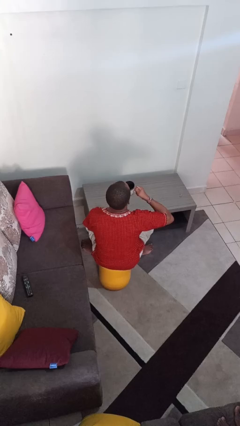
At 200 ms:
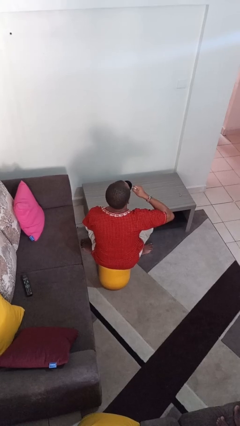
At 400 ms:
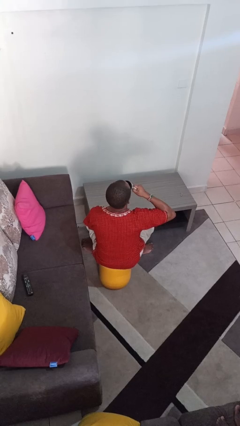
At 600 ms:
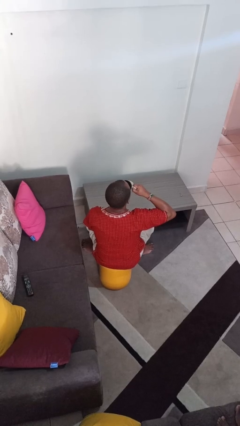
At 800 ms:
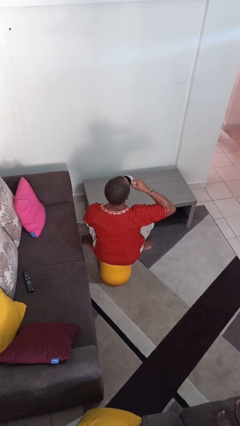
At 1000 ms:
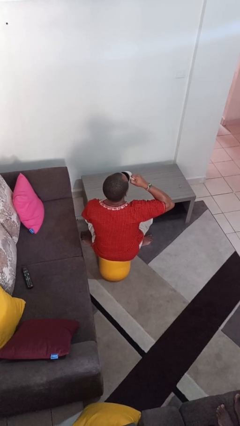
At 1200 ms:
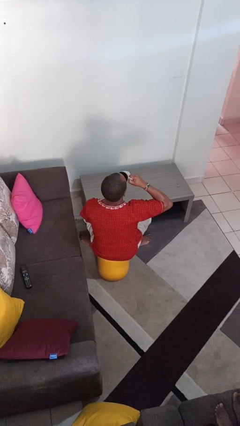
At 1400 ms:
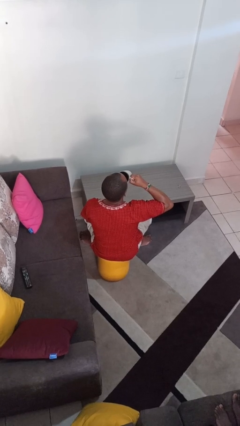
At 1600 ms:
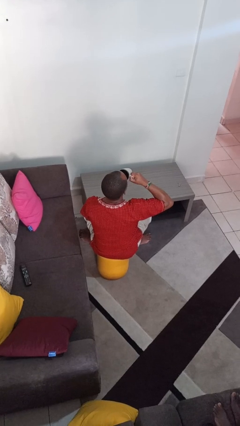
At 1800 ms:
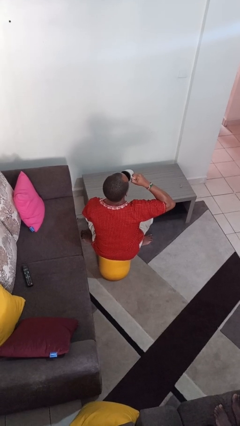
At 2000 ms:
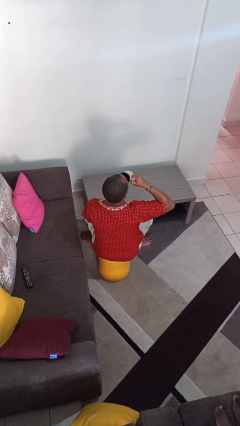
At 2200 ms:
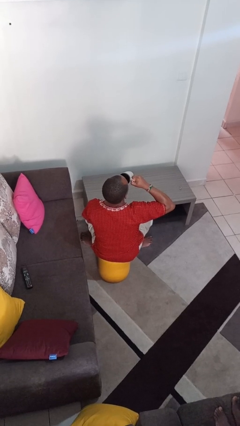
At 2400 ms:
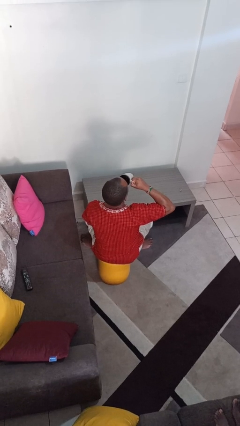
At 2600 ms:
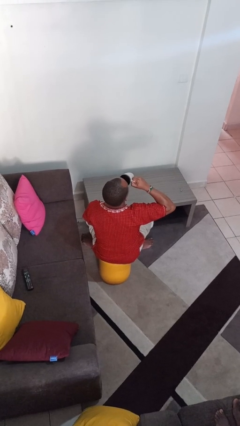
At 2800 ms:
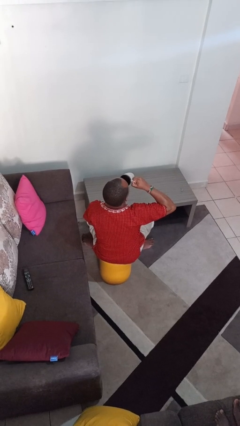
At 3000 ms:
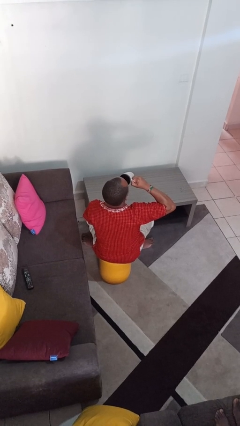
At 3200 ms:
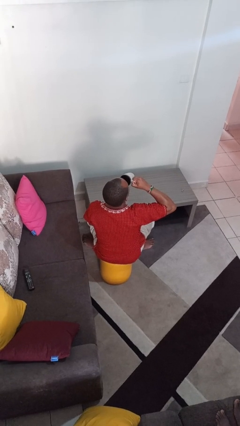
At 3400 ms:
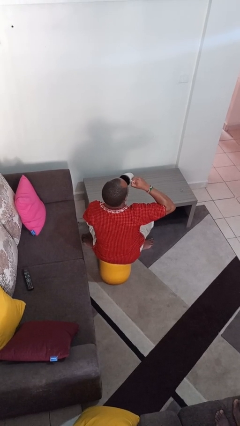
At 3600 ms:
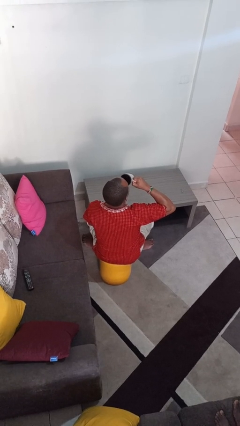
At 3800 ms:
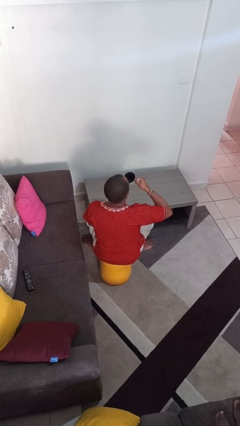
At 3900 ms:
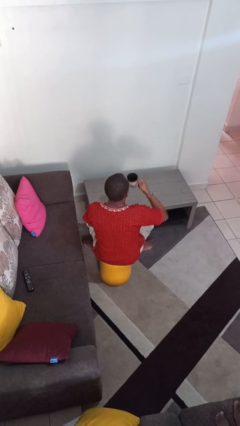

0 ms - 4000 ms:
person drinks from mug

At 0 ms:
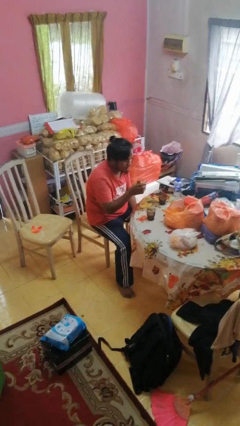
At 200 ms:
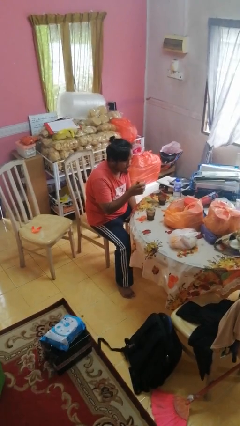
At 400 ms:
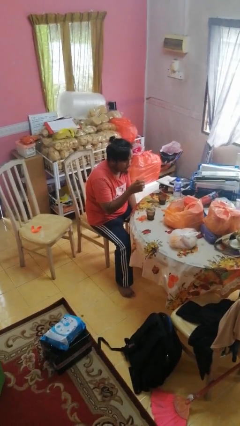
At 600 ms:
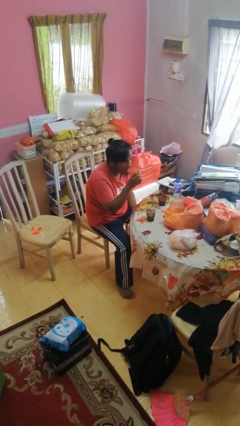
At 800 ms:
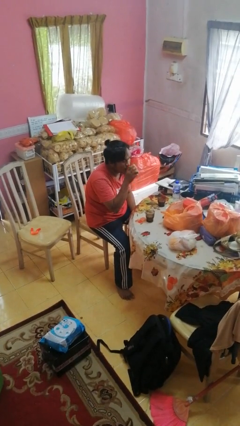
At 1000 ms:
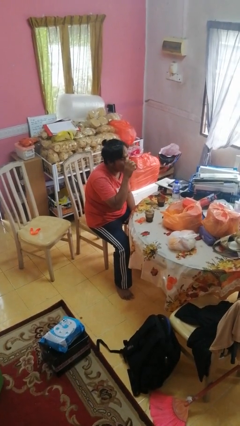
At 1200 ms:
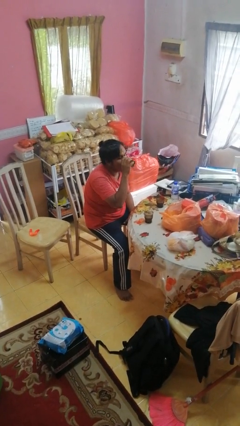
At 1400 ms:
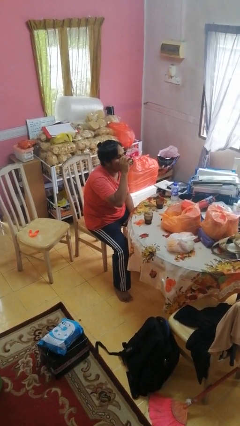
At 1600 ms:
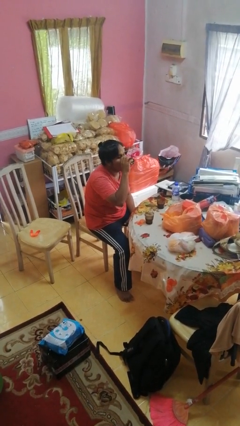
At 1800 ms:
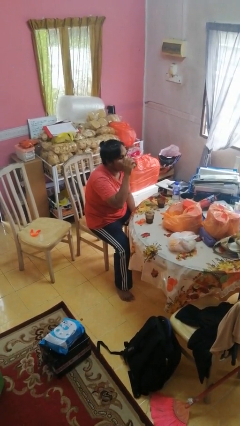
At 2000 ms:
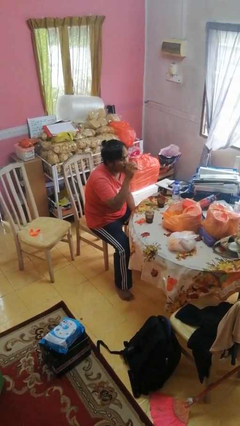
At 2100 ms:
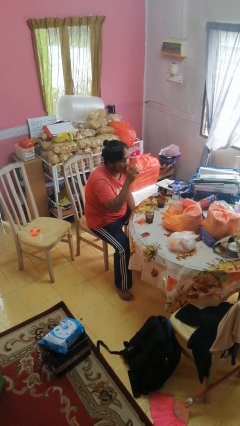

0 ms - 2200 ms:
person drinks from shotglass

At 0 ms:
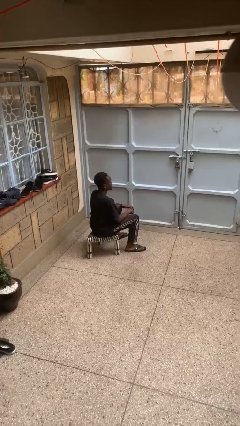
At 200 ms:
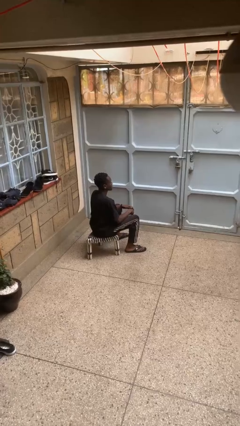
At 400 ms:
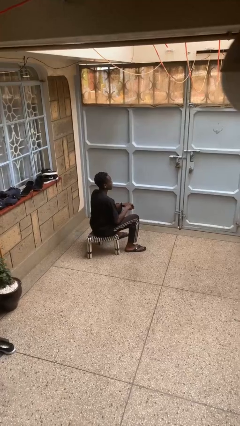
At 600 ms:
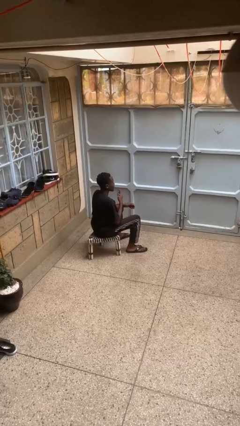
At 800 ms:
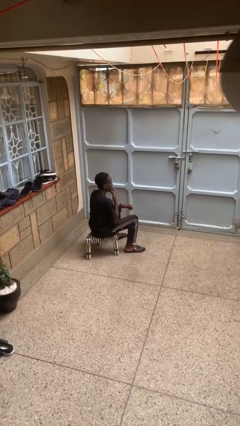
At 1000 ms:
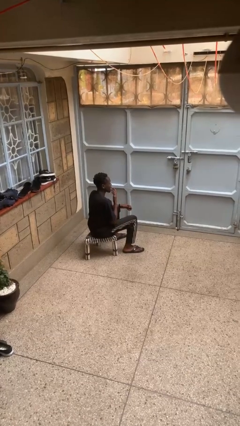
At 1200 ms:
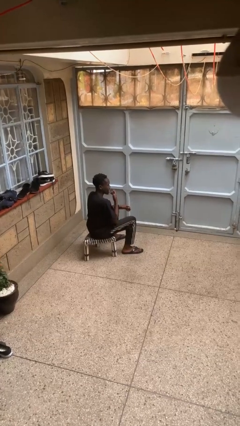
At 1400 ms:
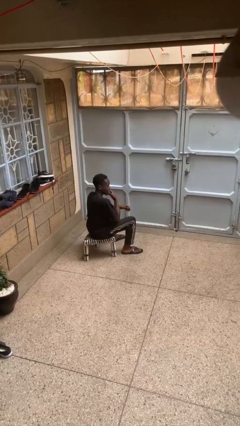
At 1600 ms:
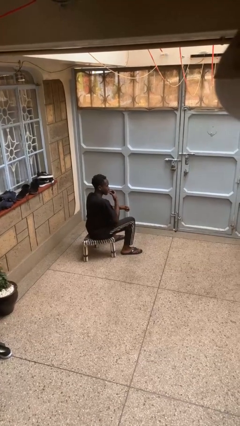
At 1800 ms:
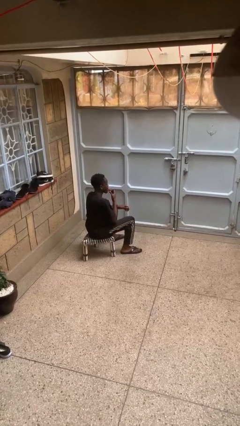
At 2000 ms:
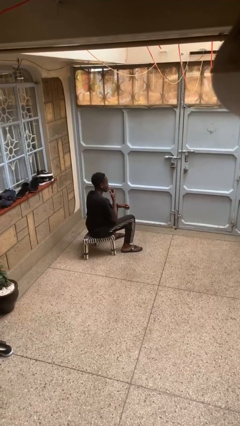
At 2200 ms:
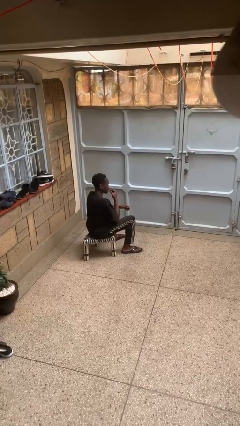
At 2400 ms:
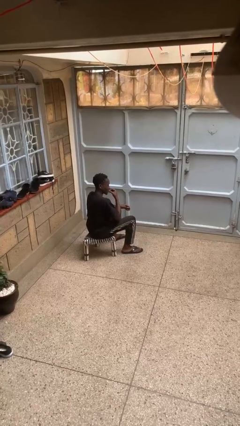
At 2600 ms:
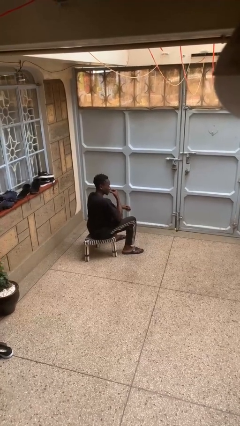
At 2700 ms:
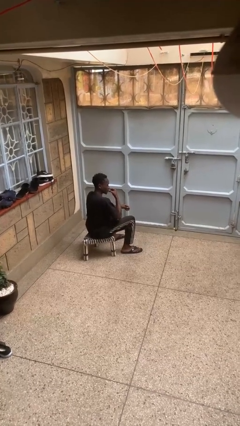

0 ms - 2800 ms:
person licks fingers

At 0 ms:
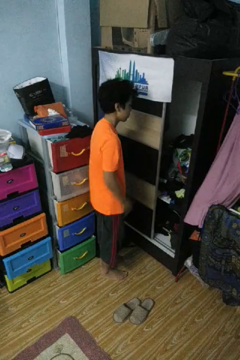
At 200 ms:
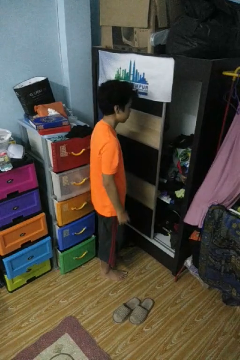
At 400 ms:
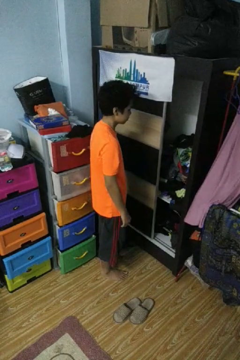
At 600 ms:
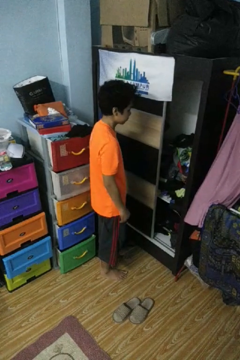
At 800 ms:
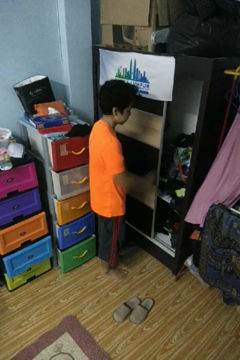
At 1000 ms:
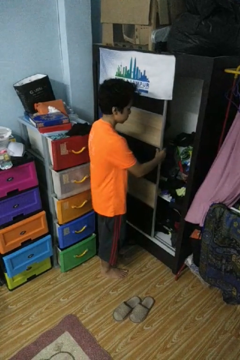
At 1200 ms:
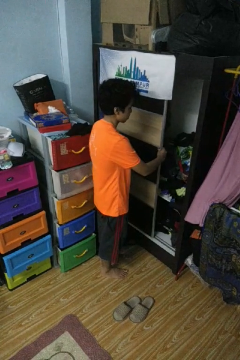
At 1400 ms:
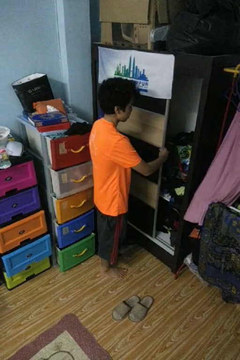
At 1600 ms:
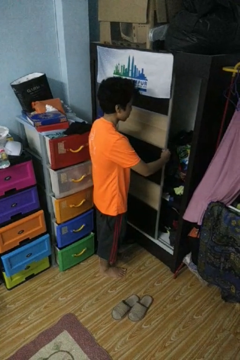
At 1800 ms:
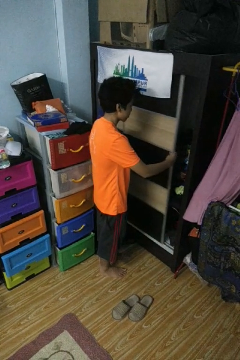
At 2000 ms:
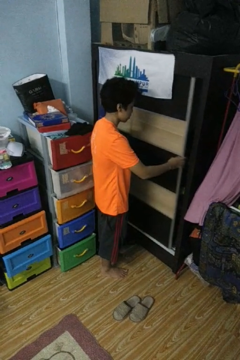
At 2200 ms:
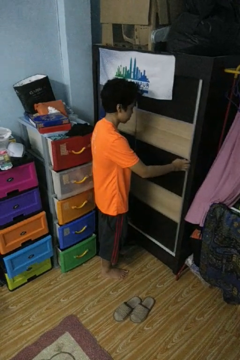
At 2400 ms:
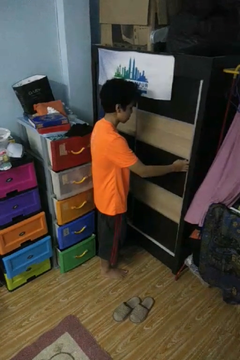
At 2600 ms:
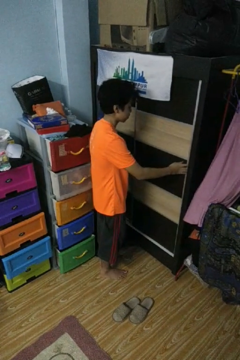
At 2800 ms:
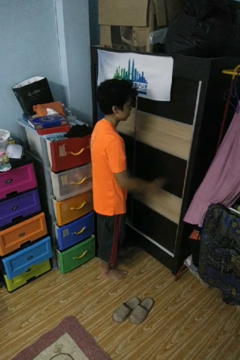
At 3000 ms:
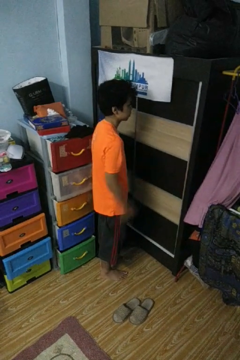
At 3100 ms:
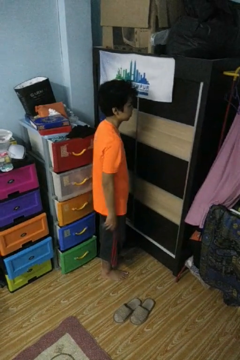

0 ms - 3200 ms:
person closes closet door

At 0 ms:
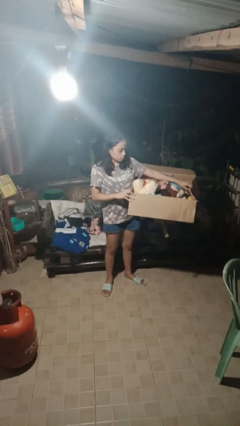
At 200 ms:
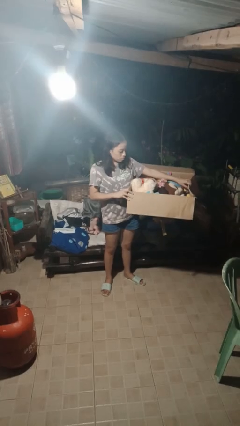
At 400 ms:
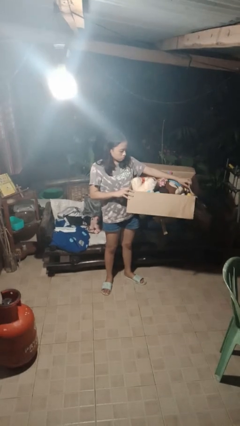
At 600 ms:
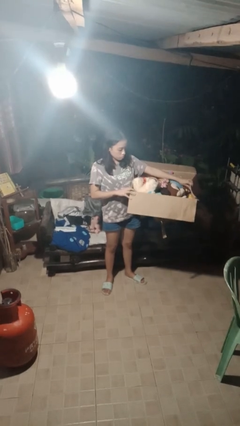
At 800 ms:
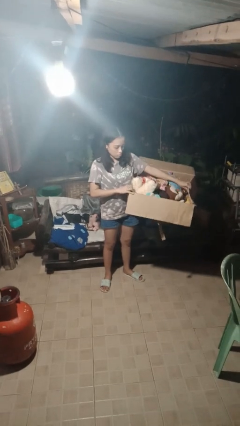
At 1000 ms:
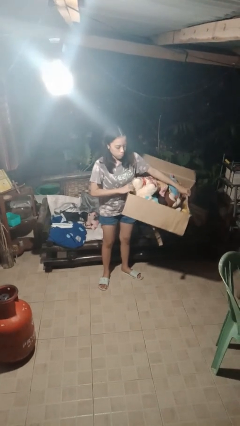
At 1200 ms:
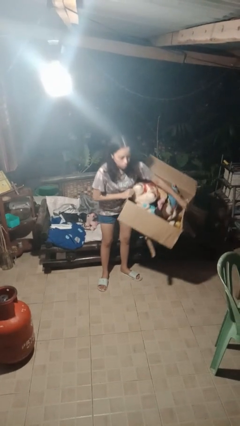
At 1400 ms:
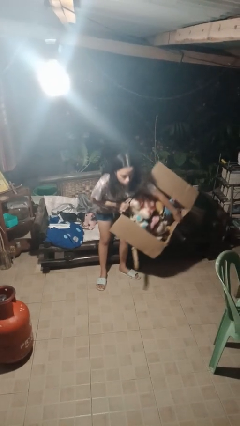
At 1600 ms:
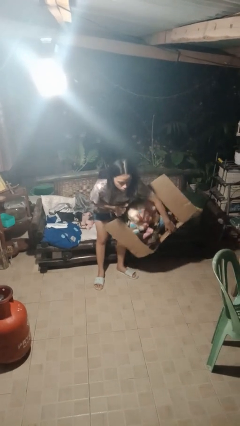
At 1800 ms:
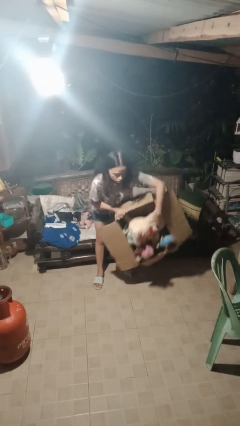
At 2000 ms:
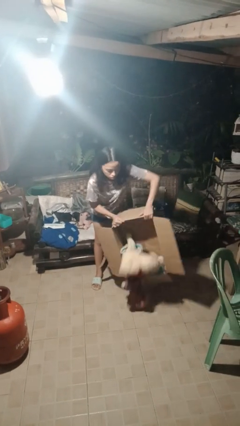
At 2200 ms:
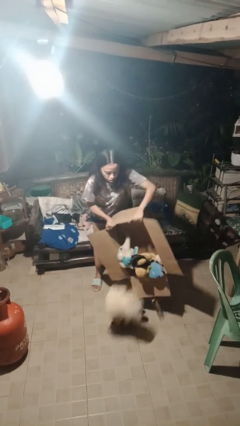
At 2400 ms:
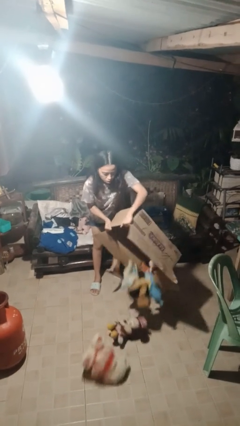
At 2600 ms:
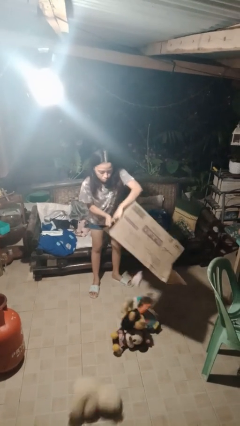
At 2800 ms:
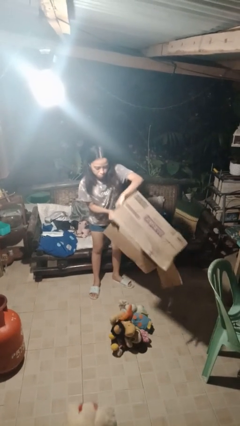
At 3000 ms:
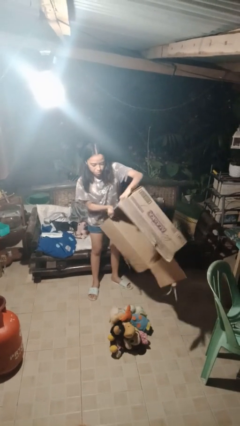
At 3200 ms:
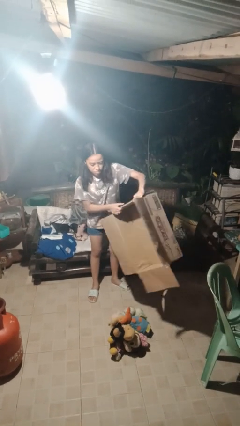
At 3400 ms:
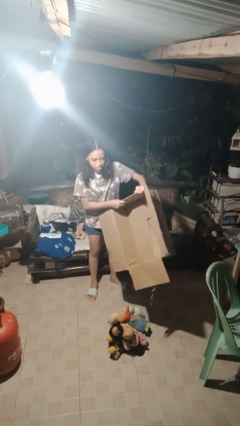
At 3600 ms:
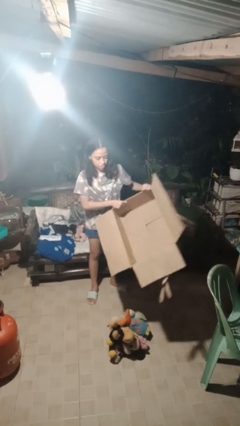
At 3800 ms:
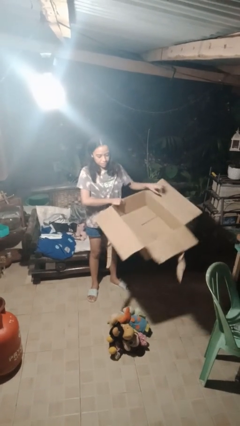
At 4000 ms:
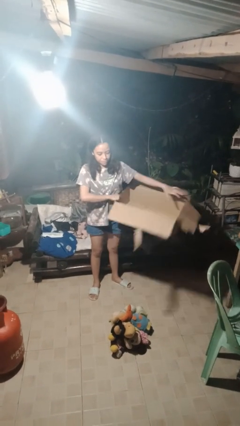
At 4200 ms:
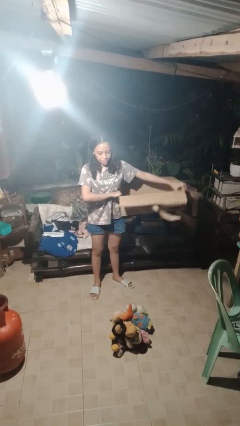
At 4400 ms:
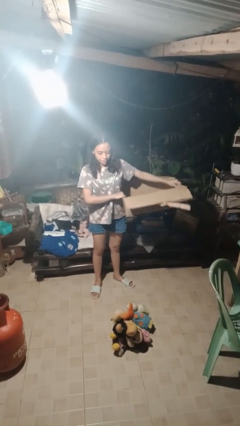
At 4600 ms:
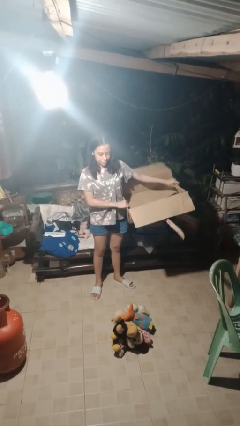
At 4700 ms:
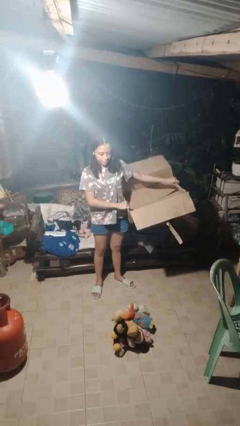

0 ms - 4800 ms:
person unloads box onto floor

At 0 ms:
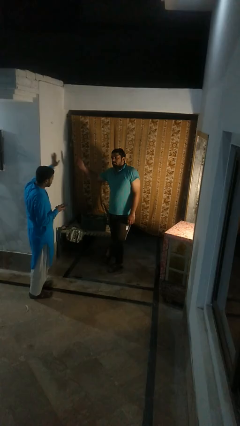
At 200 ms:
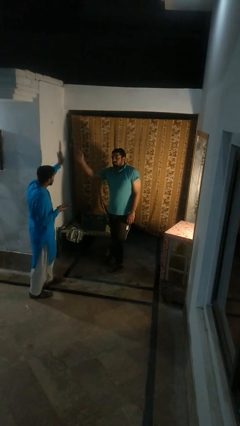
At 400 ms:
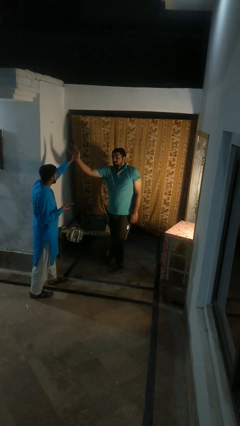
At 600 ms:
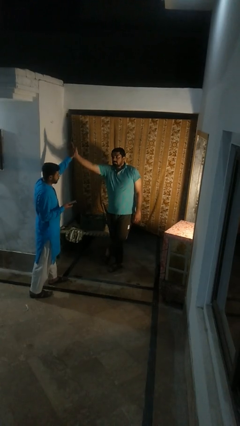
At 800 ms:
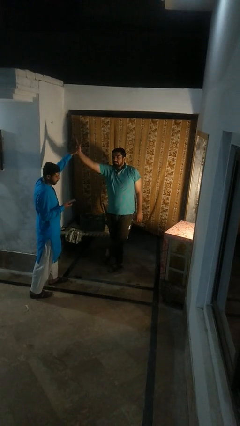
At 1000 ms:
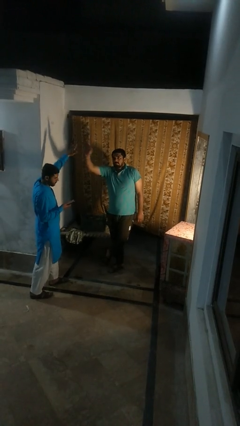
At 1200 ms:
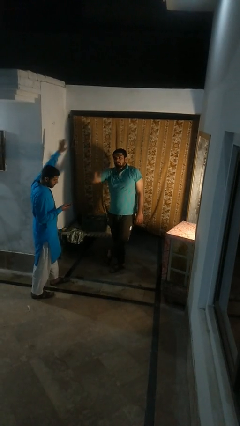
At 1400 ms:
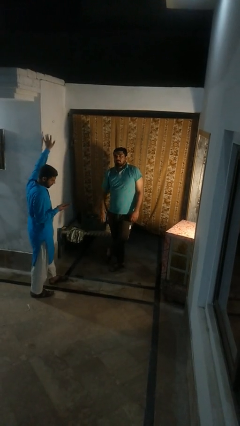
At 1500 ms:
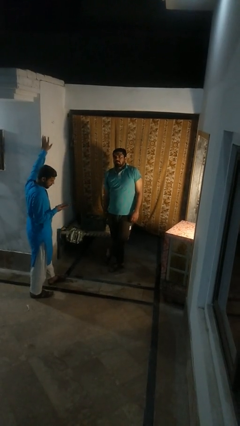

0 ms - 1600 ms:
person highfives hand
